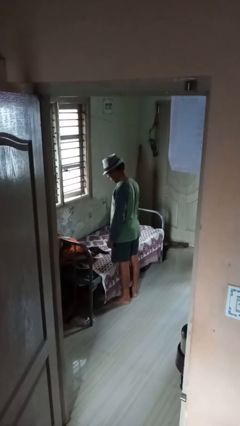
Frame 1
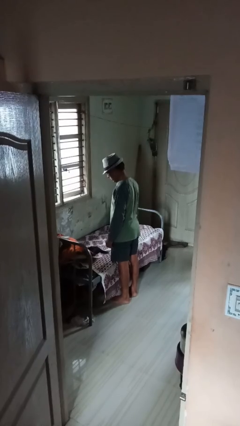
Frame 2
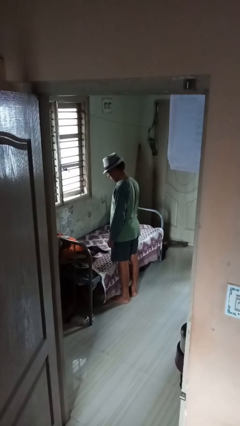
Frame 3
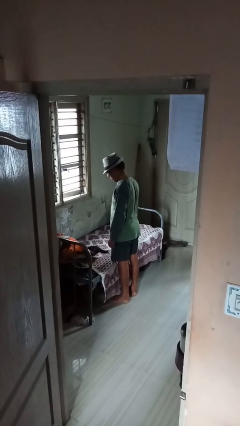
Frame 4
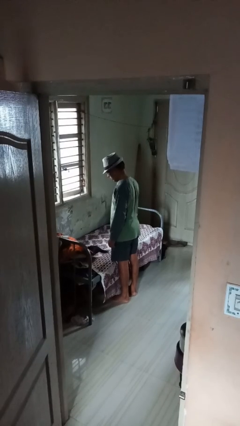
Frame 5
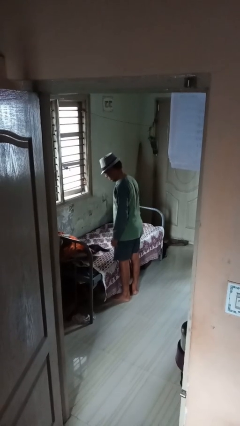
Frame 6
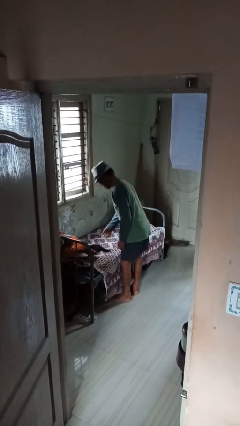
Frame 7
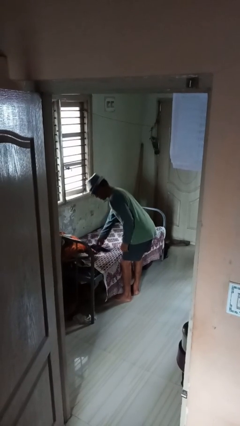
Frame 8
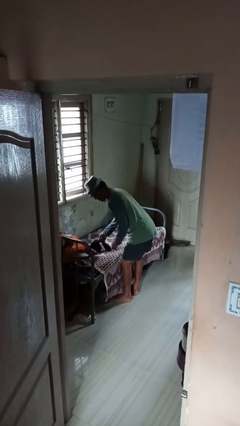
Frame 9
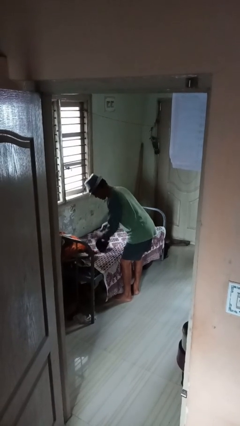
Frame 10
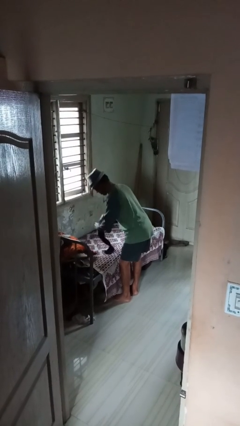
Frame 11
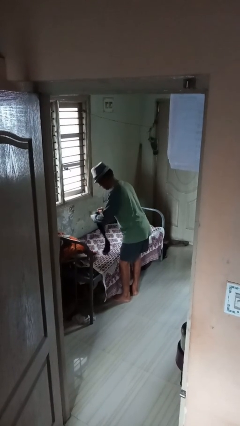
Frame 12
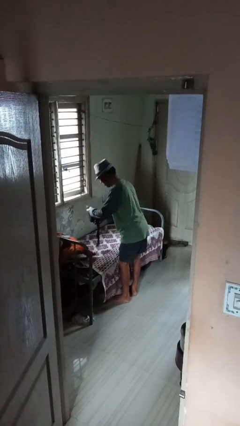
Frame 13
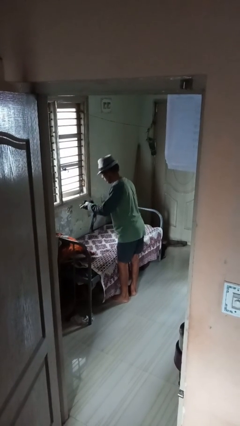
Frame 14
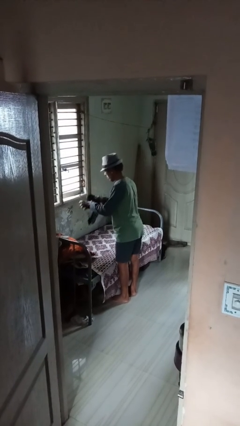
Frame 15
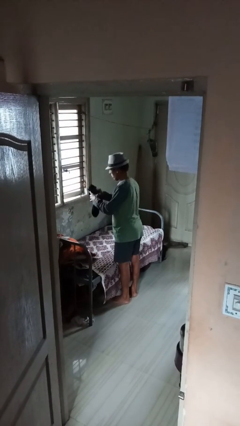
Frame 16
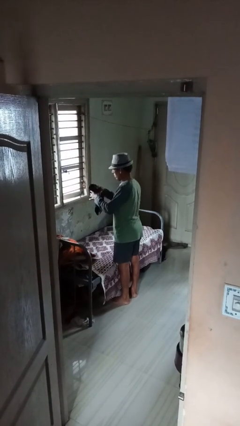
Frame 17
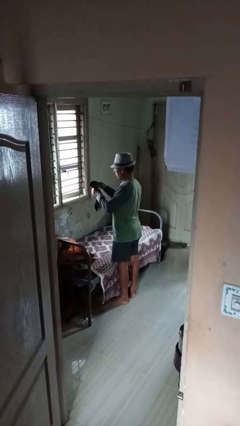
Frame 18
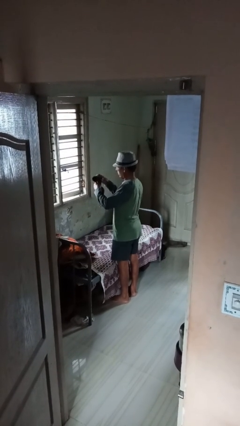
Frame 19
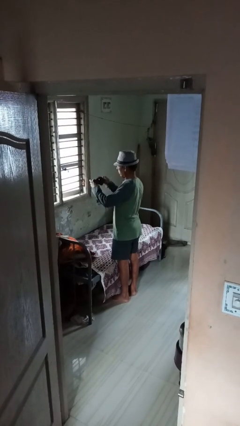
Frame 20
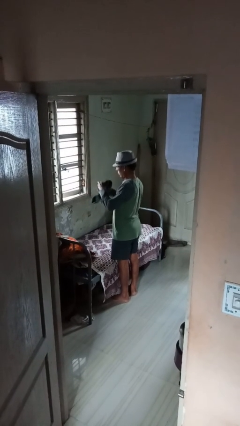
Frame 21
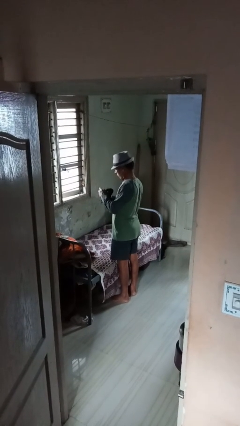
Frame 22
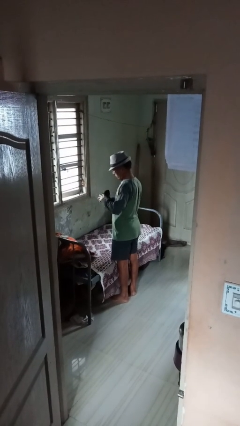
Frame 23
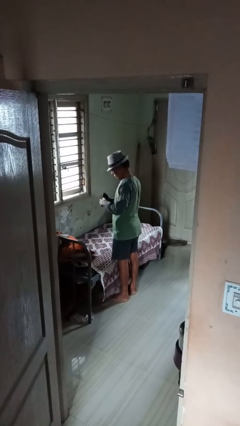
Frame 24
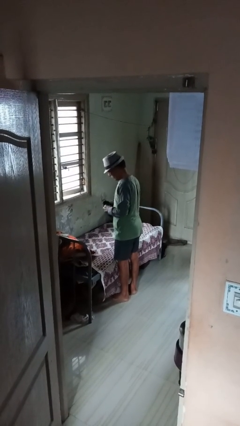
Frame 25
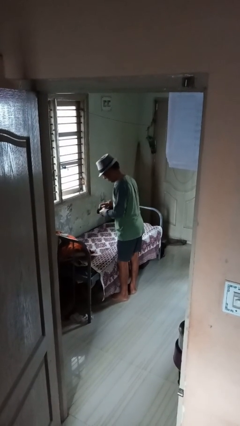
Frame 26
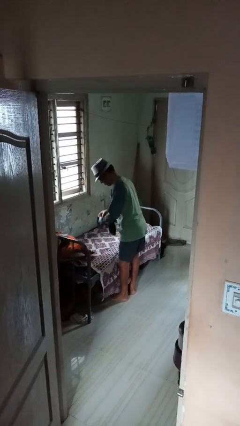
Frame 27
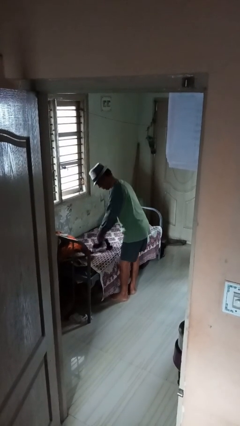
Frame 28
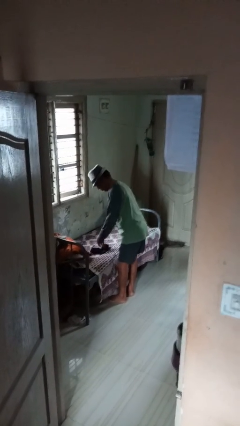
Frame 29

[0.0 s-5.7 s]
person folds socks

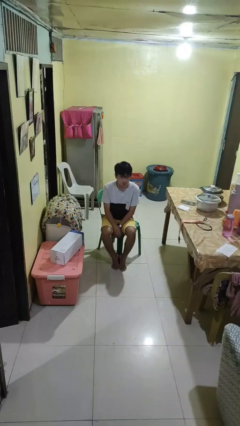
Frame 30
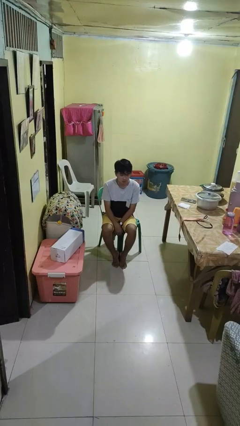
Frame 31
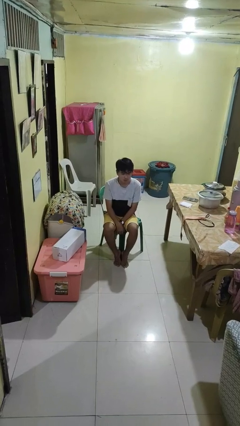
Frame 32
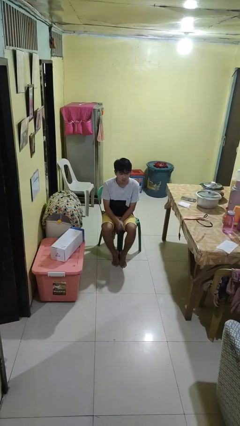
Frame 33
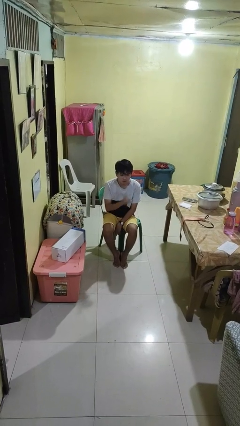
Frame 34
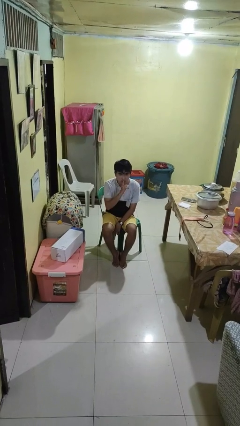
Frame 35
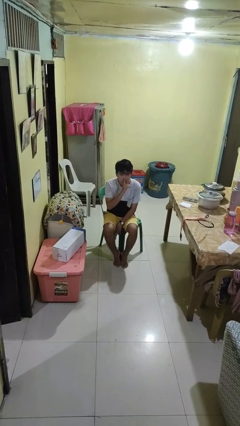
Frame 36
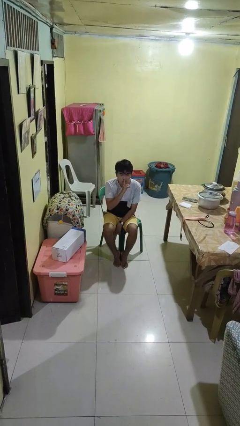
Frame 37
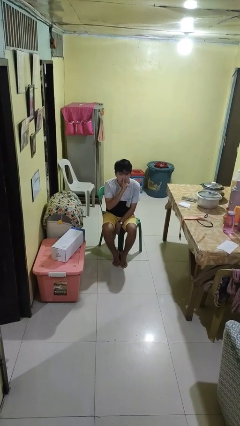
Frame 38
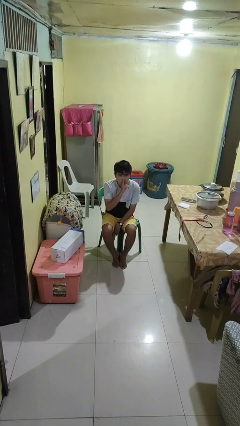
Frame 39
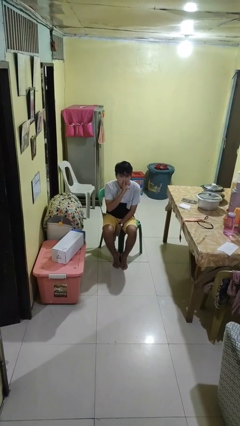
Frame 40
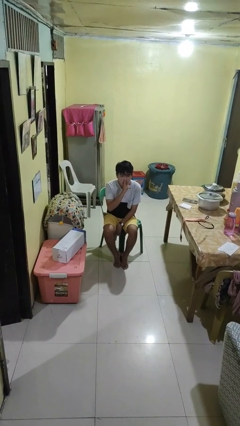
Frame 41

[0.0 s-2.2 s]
person gestures be quiet

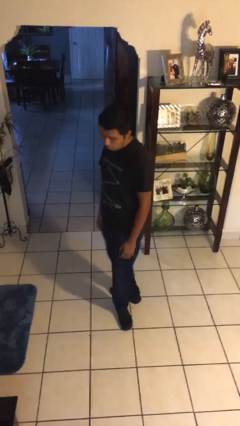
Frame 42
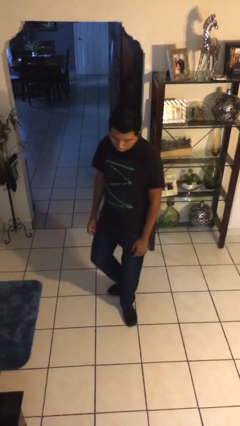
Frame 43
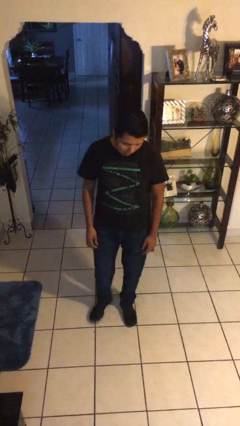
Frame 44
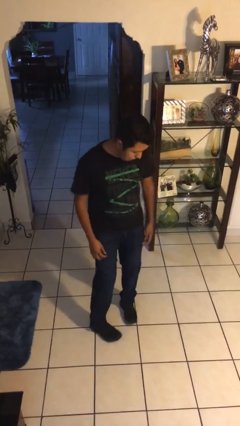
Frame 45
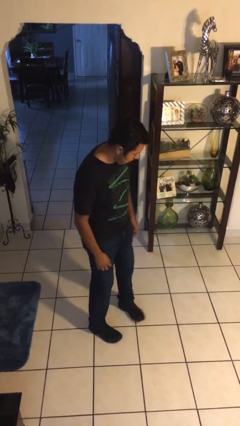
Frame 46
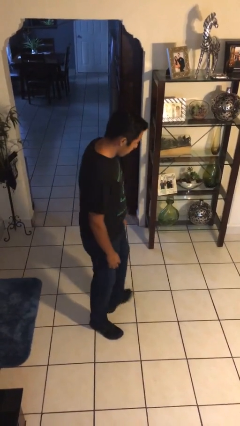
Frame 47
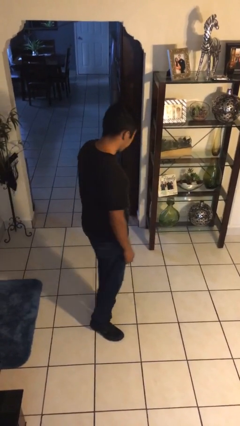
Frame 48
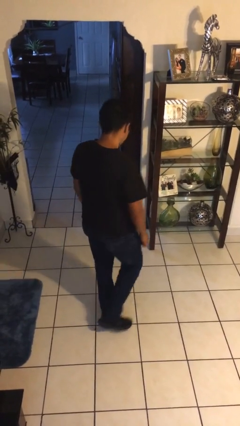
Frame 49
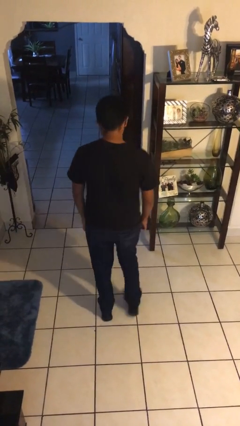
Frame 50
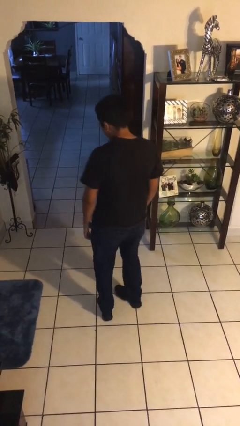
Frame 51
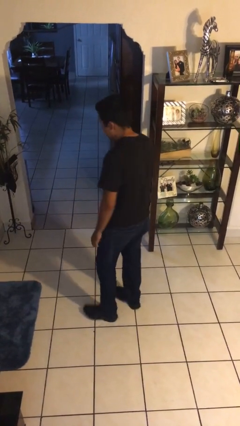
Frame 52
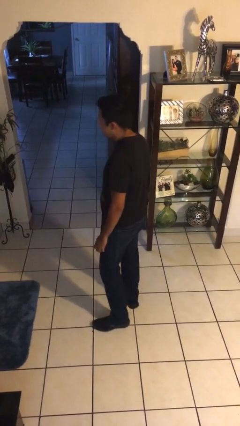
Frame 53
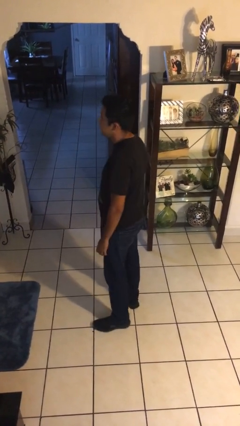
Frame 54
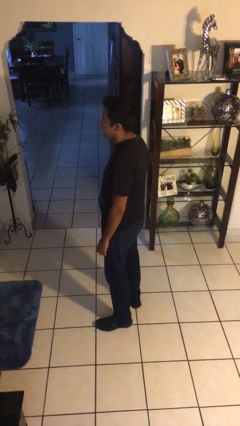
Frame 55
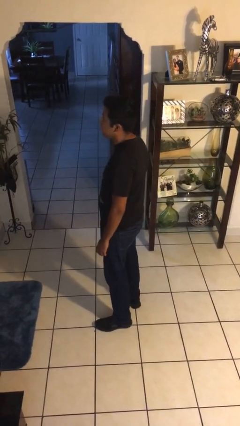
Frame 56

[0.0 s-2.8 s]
person twirls

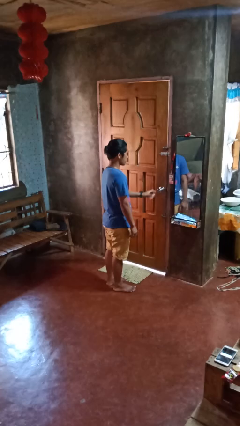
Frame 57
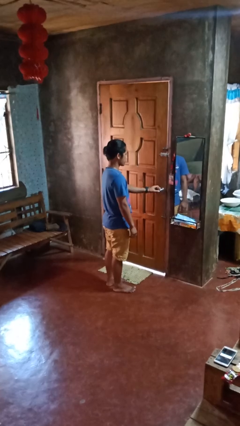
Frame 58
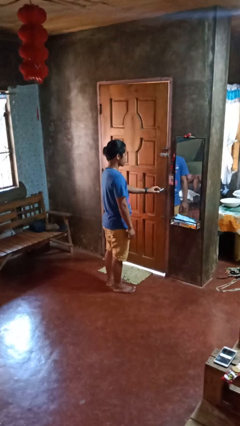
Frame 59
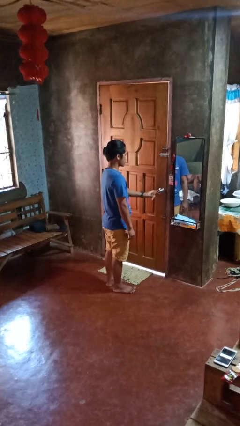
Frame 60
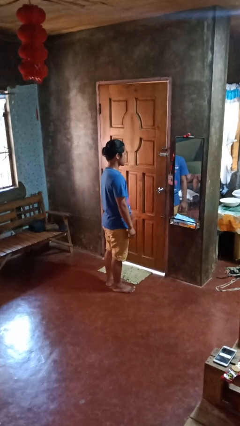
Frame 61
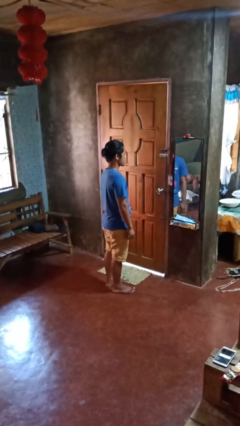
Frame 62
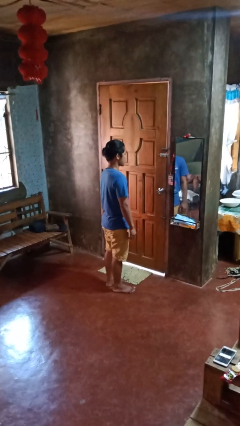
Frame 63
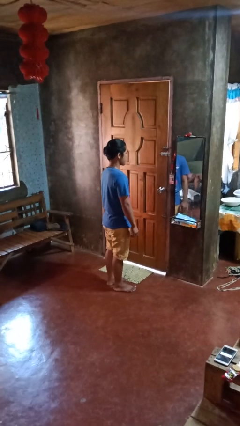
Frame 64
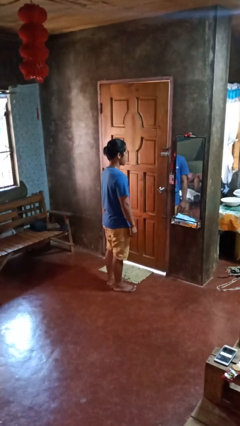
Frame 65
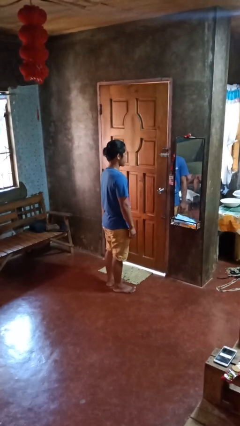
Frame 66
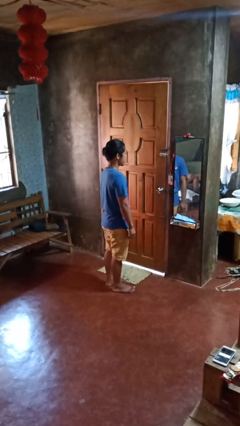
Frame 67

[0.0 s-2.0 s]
person locks door with keys

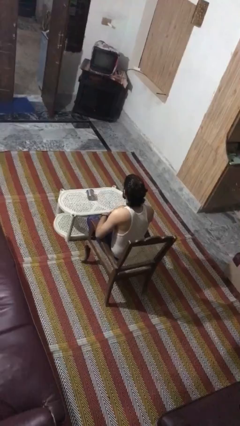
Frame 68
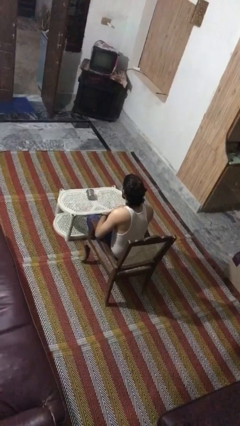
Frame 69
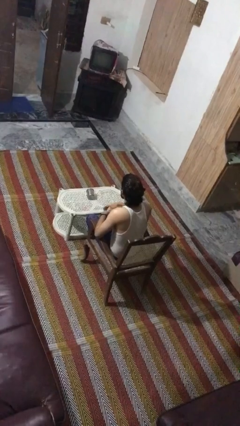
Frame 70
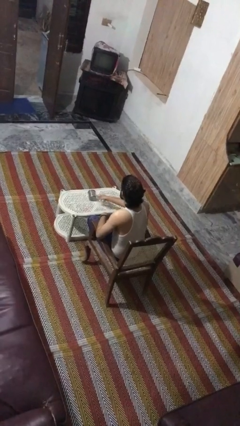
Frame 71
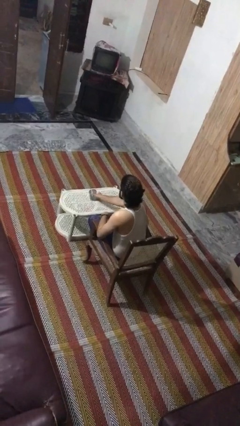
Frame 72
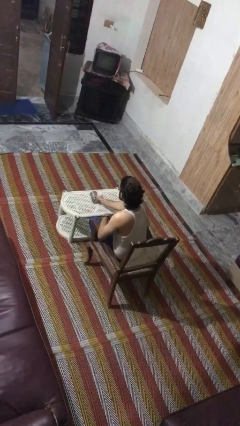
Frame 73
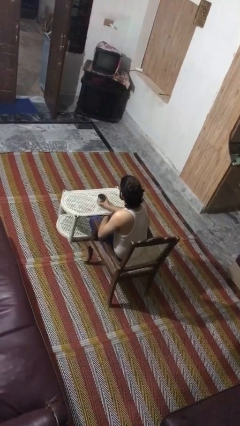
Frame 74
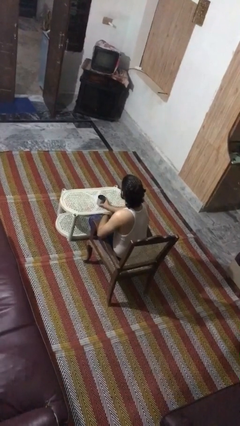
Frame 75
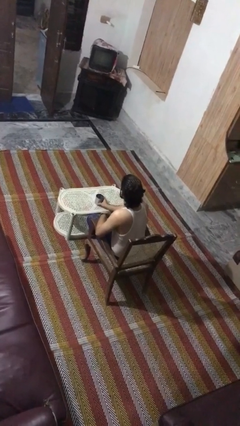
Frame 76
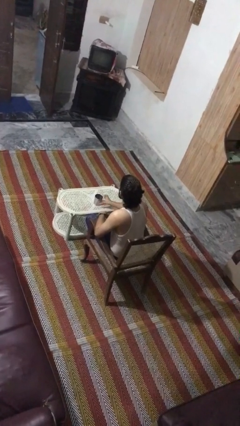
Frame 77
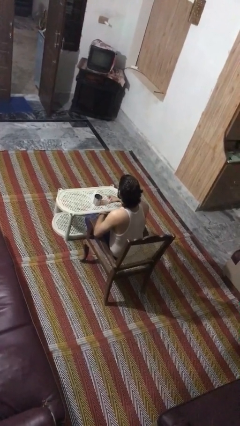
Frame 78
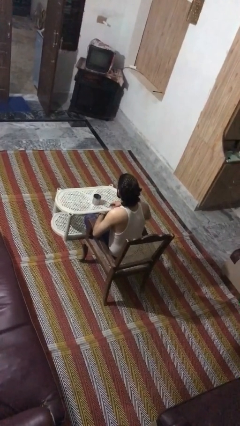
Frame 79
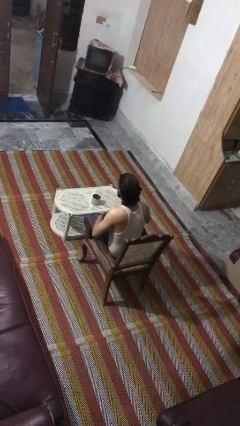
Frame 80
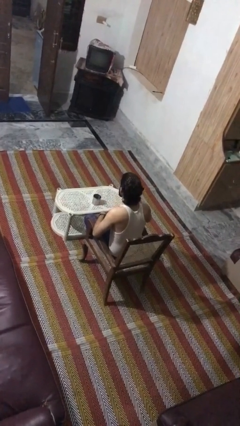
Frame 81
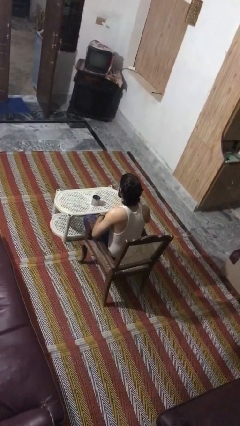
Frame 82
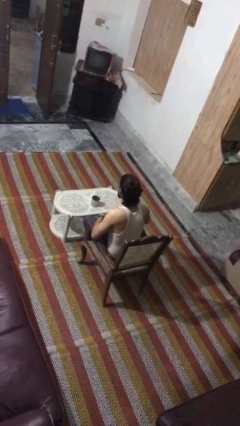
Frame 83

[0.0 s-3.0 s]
person sets upright glass

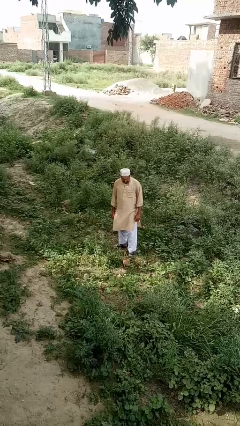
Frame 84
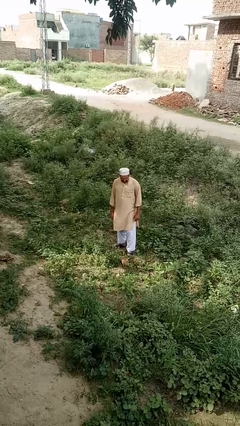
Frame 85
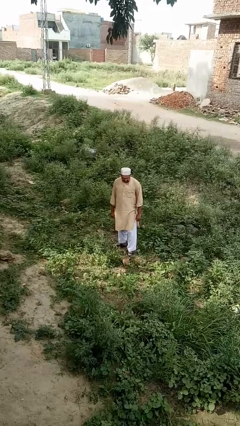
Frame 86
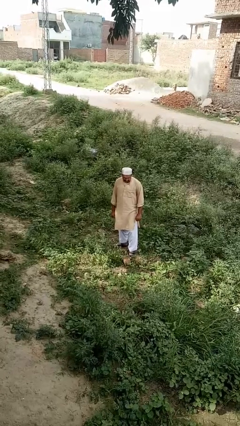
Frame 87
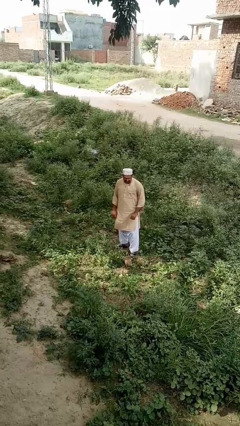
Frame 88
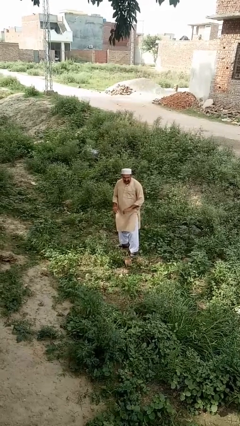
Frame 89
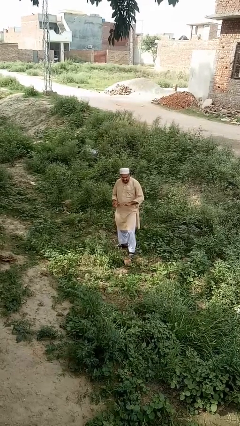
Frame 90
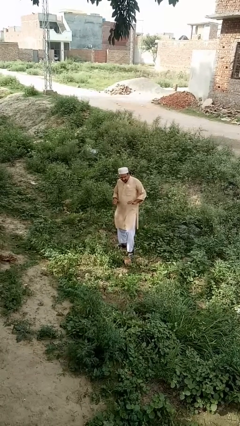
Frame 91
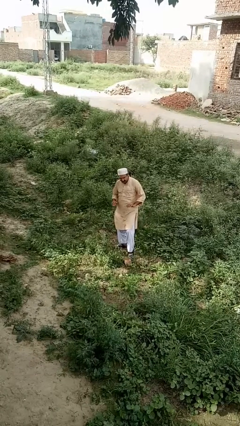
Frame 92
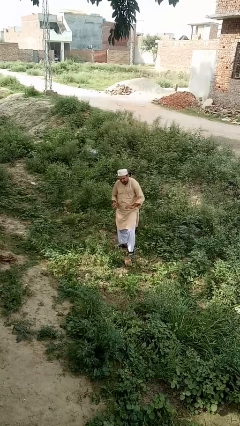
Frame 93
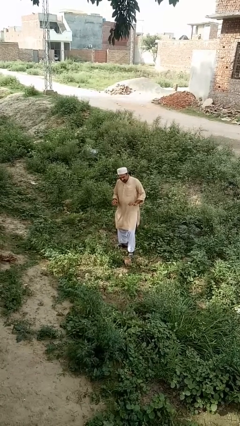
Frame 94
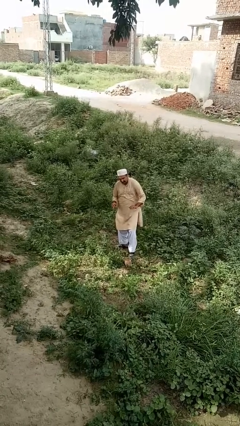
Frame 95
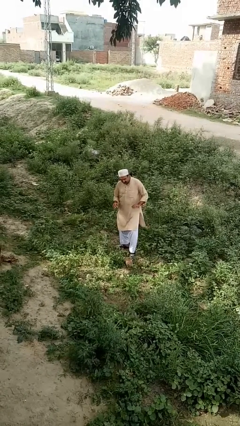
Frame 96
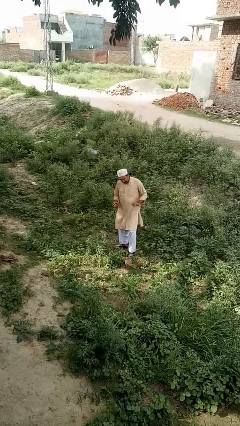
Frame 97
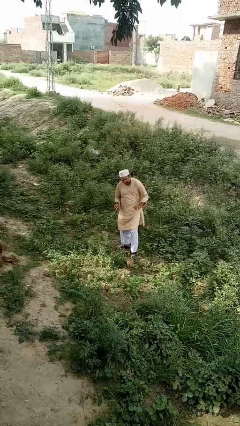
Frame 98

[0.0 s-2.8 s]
person dances in place
